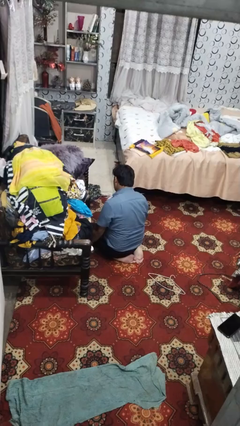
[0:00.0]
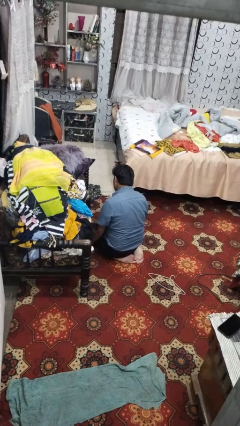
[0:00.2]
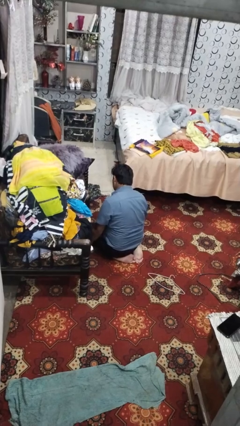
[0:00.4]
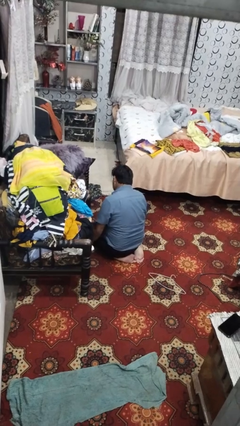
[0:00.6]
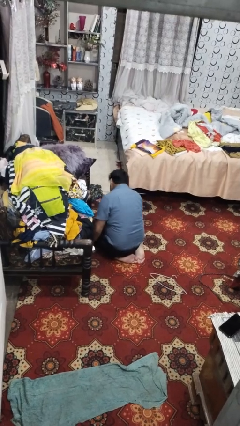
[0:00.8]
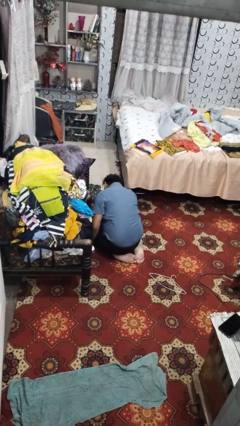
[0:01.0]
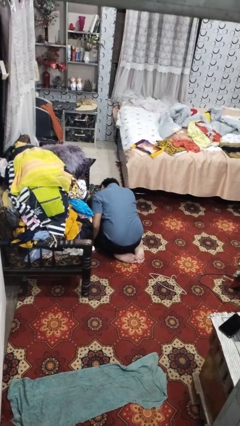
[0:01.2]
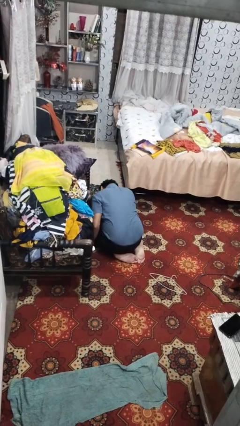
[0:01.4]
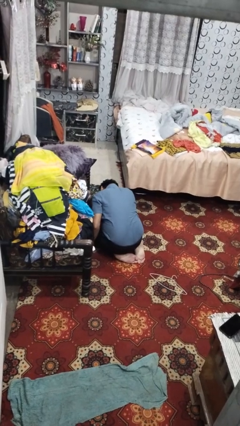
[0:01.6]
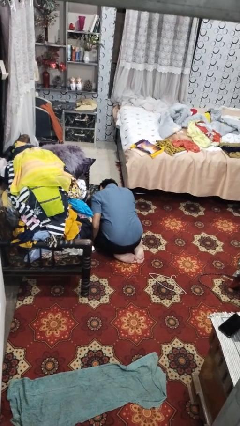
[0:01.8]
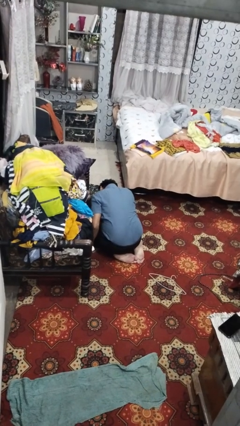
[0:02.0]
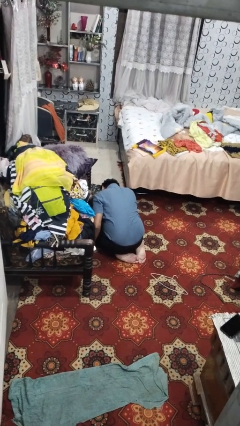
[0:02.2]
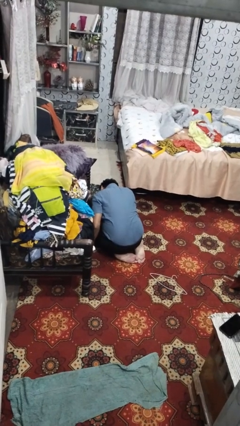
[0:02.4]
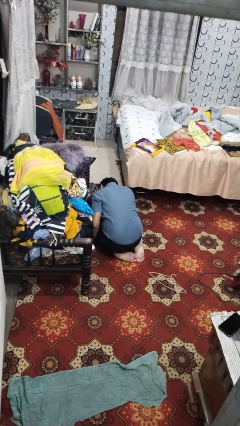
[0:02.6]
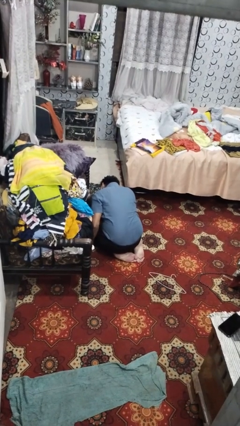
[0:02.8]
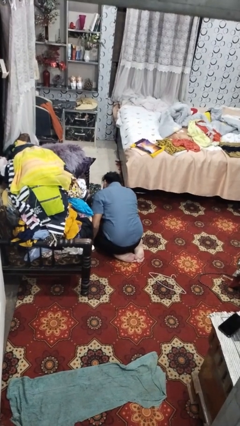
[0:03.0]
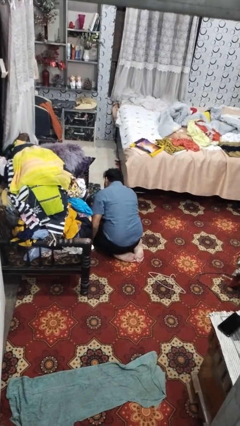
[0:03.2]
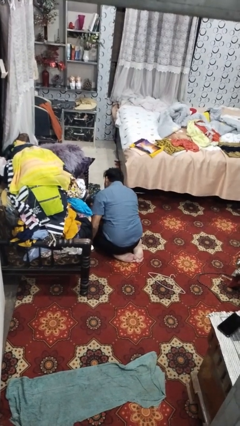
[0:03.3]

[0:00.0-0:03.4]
person searches under couch

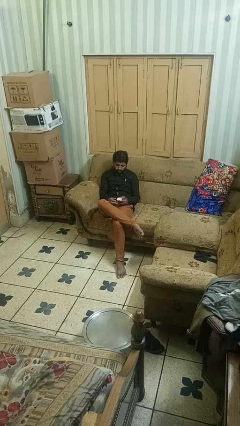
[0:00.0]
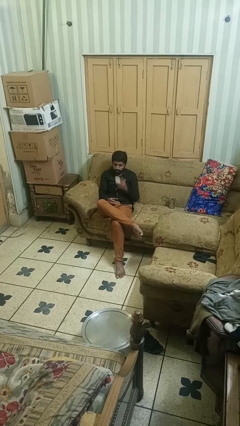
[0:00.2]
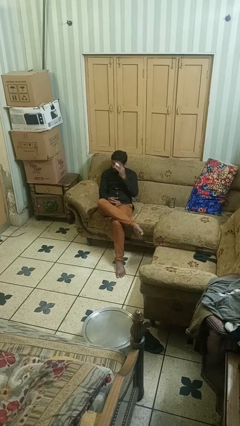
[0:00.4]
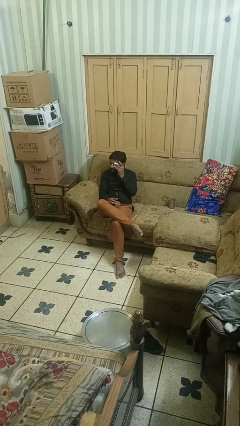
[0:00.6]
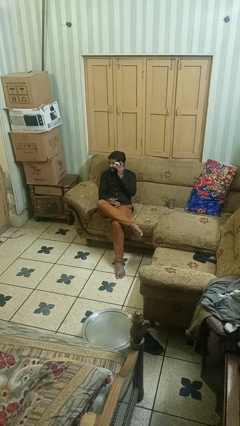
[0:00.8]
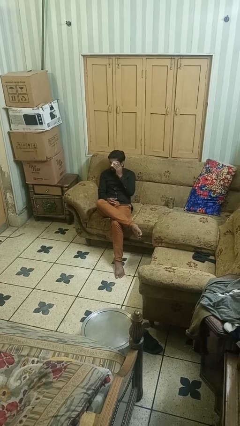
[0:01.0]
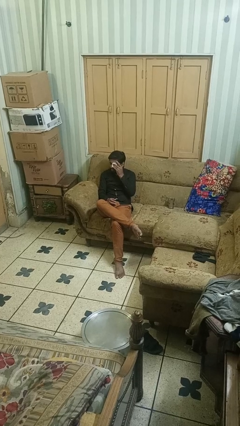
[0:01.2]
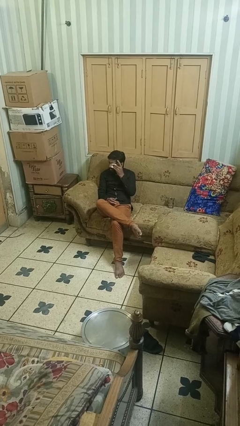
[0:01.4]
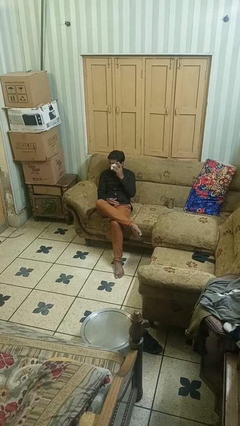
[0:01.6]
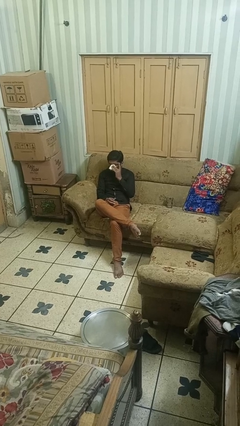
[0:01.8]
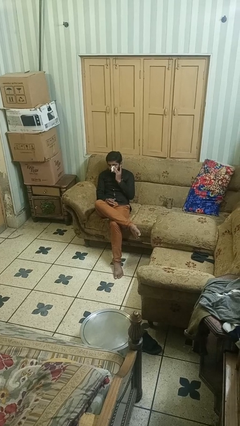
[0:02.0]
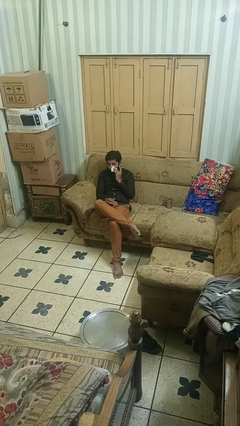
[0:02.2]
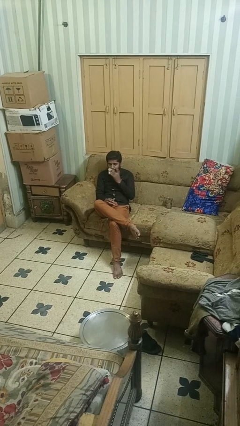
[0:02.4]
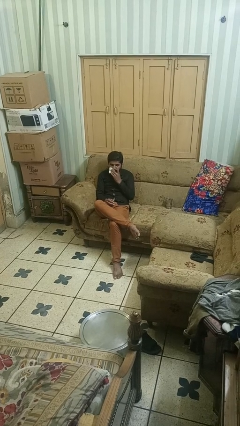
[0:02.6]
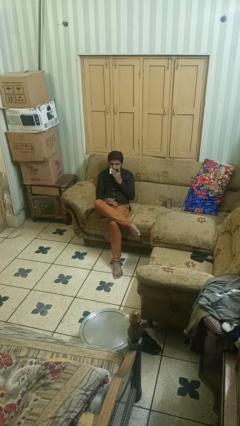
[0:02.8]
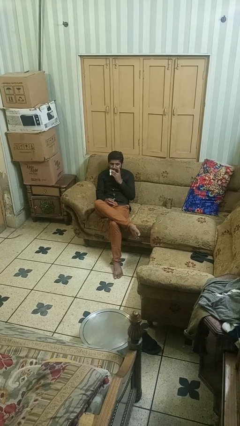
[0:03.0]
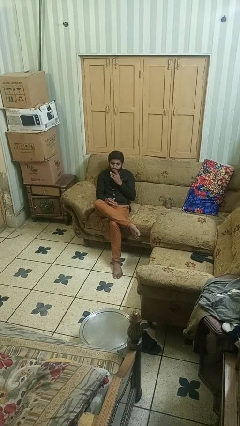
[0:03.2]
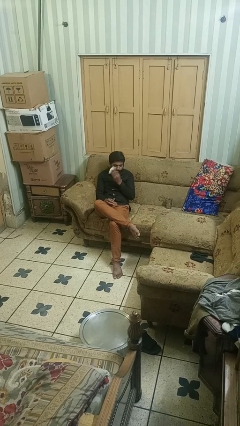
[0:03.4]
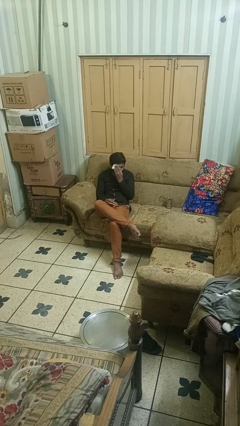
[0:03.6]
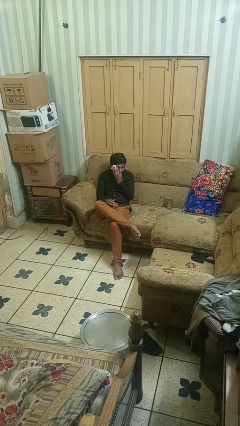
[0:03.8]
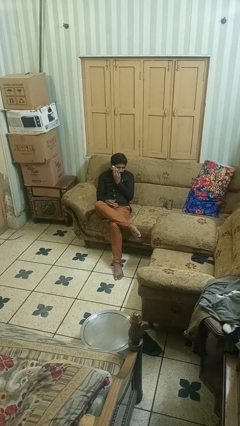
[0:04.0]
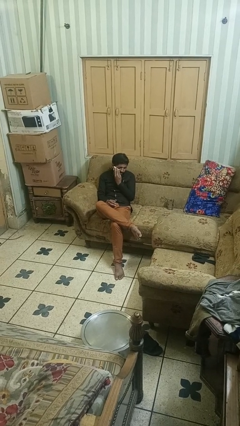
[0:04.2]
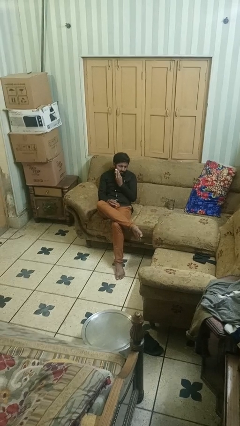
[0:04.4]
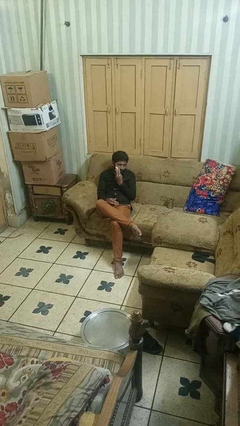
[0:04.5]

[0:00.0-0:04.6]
person wipes mouth with napkin

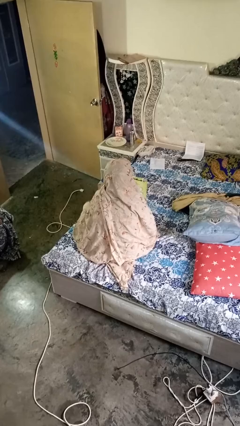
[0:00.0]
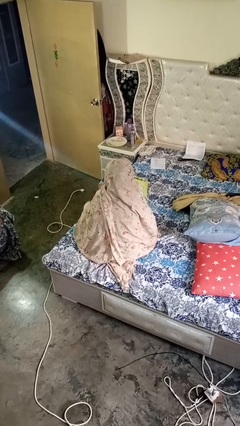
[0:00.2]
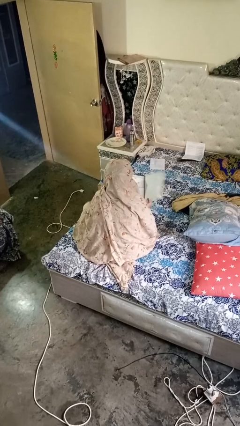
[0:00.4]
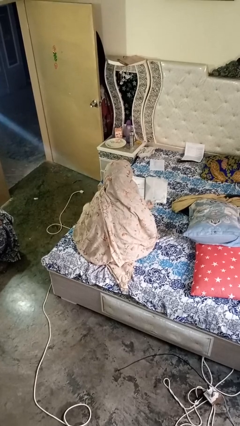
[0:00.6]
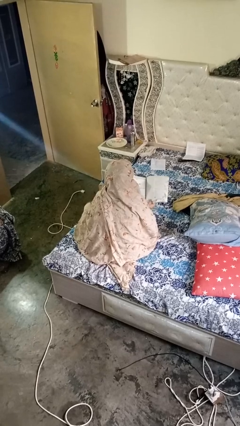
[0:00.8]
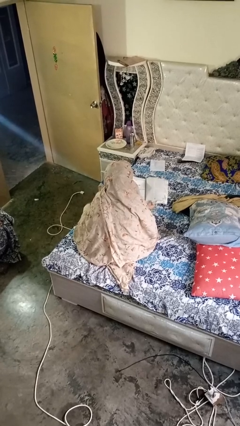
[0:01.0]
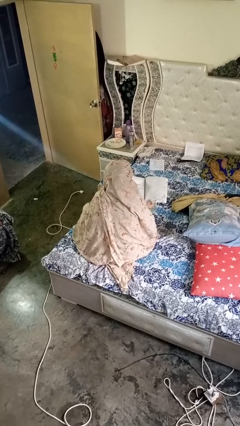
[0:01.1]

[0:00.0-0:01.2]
person reads magazine

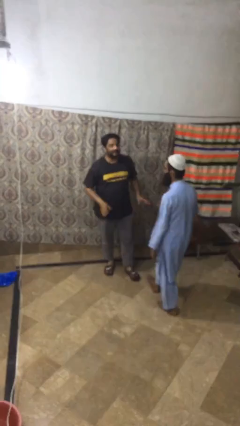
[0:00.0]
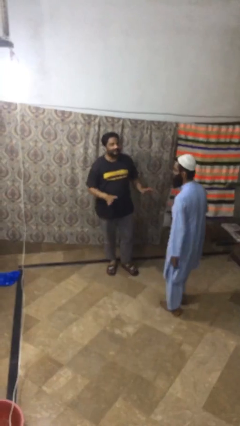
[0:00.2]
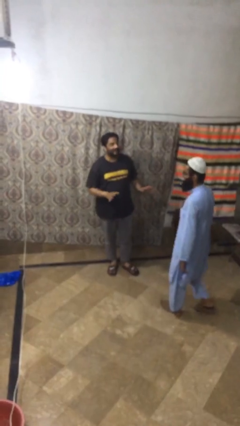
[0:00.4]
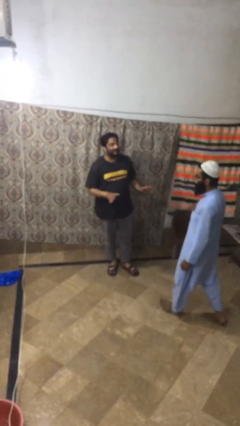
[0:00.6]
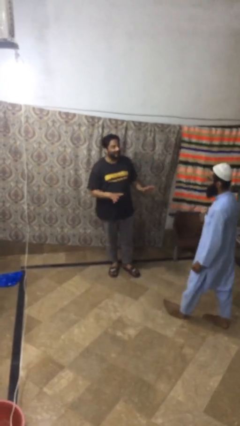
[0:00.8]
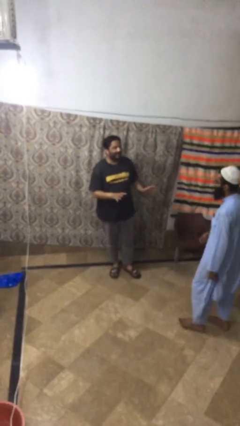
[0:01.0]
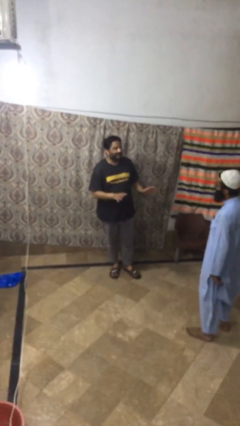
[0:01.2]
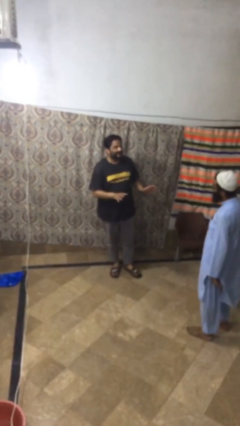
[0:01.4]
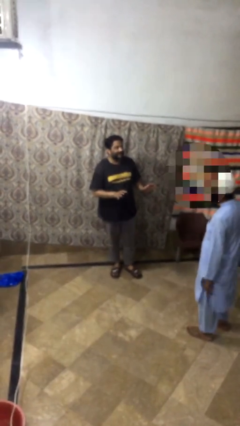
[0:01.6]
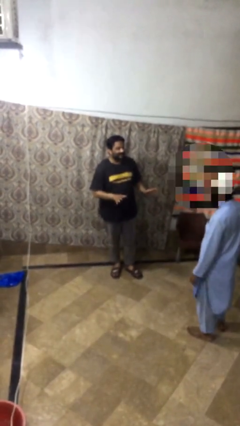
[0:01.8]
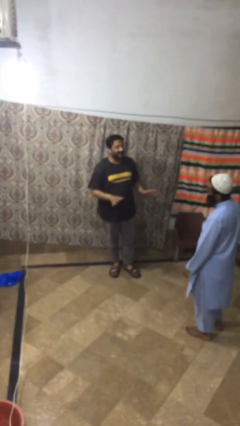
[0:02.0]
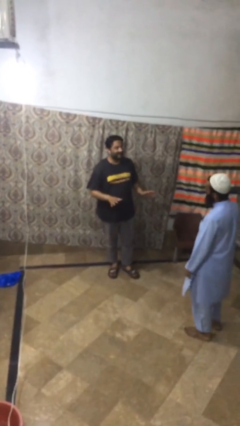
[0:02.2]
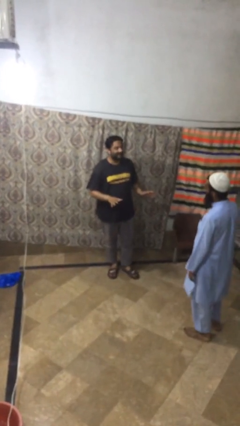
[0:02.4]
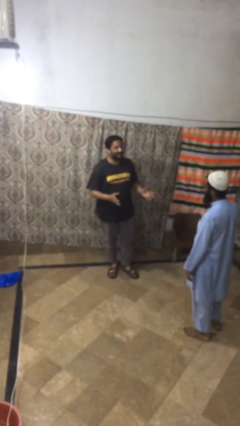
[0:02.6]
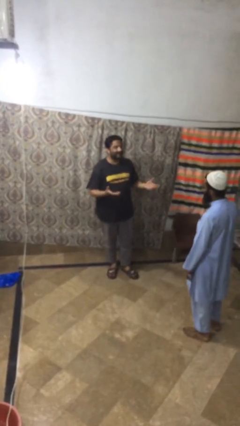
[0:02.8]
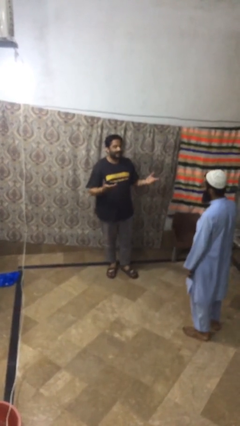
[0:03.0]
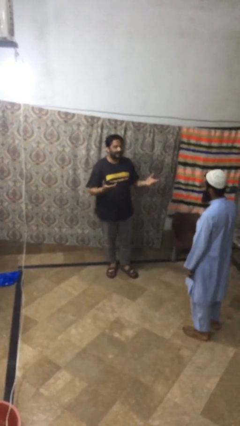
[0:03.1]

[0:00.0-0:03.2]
person talks to person

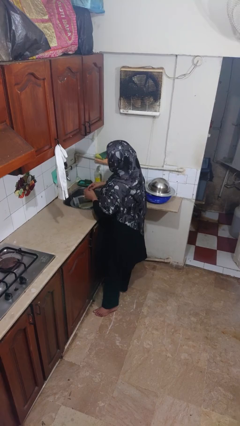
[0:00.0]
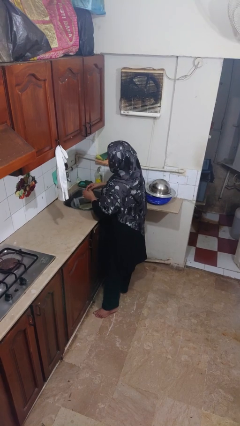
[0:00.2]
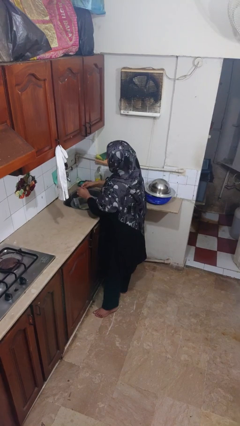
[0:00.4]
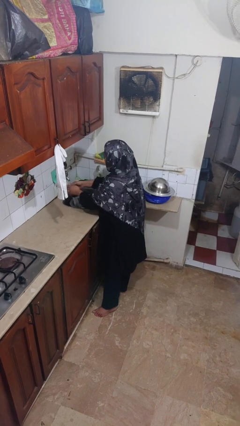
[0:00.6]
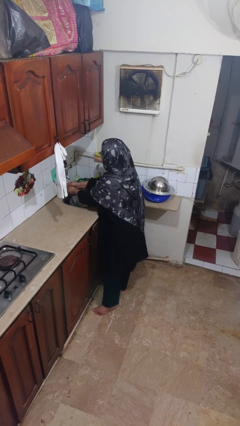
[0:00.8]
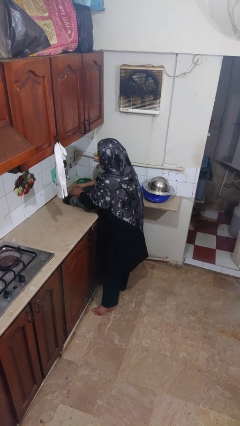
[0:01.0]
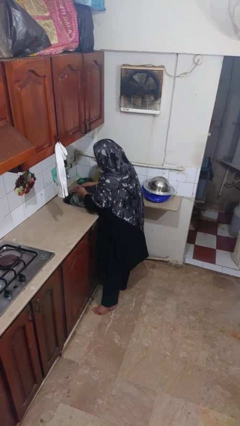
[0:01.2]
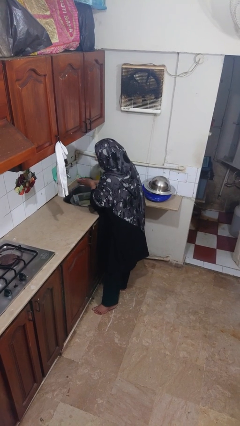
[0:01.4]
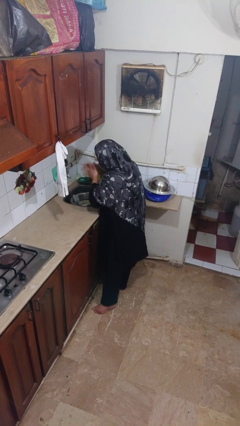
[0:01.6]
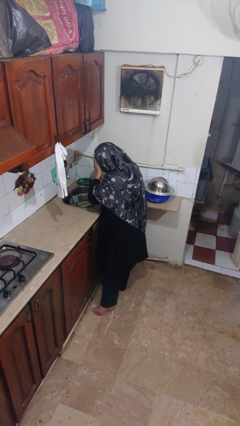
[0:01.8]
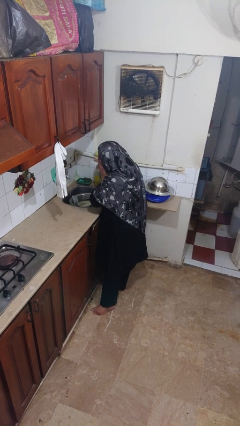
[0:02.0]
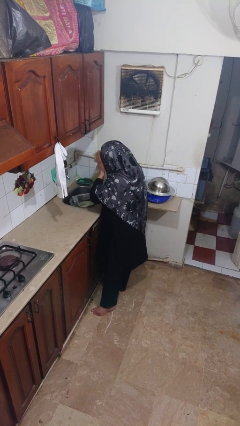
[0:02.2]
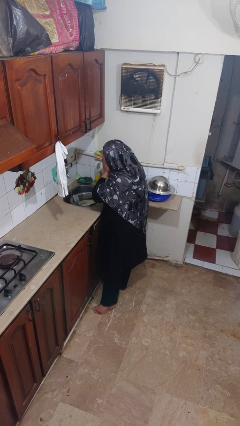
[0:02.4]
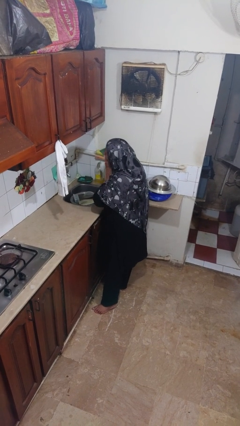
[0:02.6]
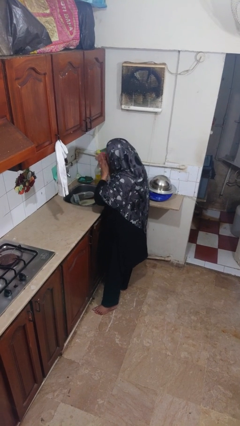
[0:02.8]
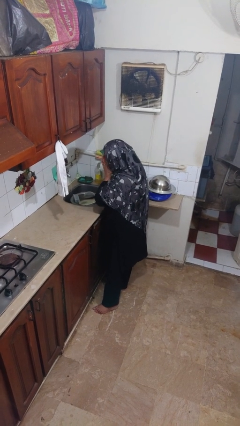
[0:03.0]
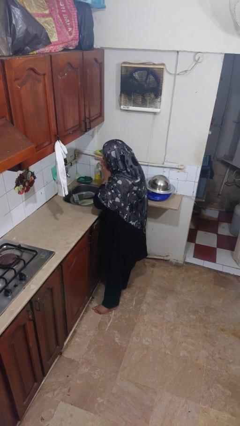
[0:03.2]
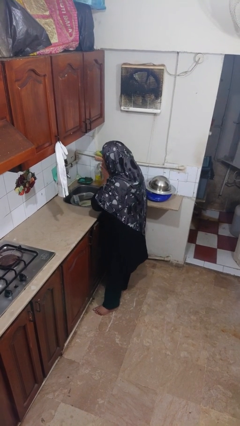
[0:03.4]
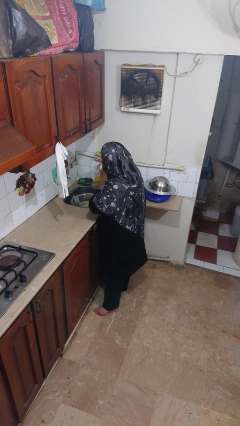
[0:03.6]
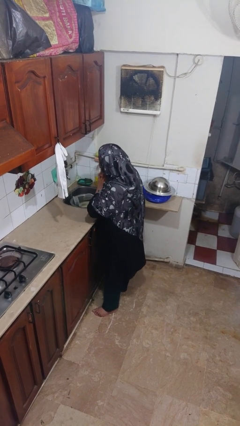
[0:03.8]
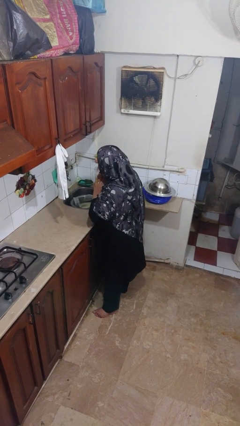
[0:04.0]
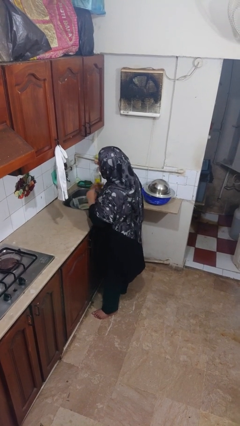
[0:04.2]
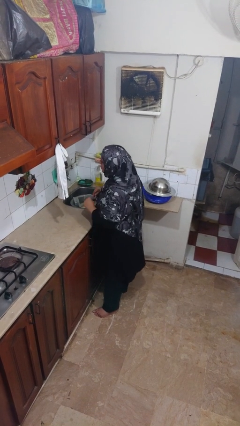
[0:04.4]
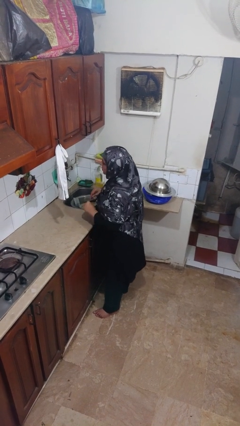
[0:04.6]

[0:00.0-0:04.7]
person washes face

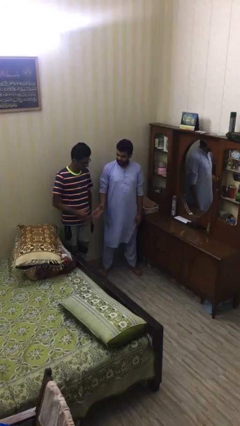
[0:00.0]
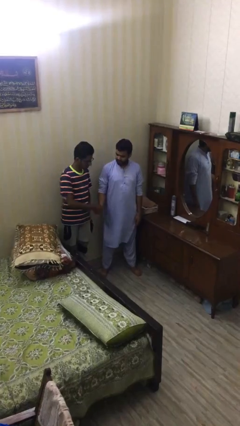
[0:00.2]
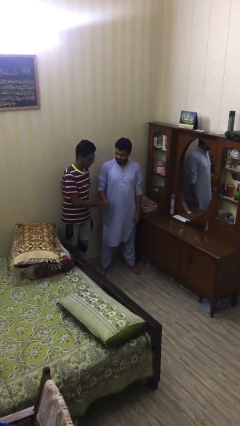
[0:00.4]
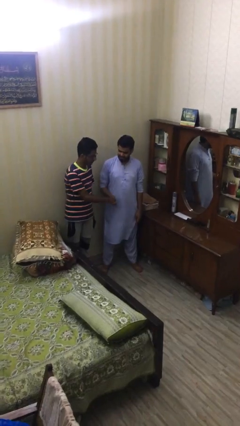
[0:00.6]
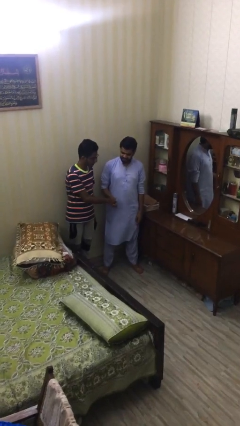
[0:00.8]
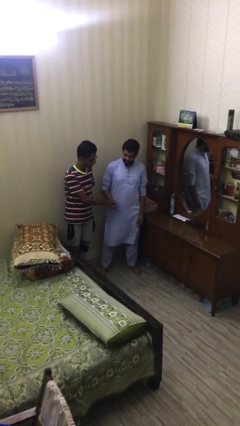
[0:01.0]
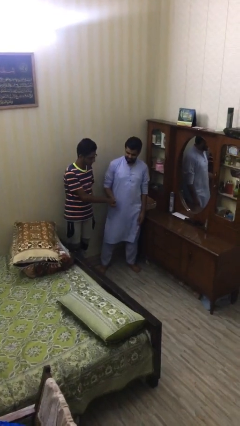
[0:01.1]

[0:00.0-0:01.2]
person shakes hand
